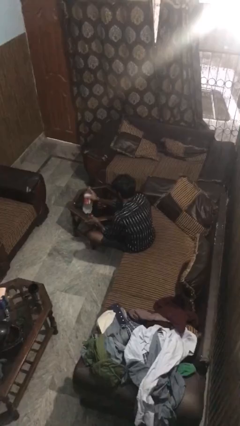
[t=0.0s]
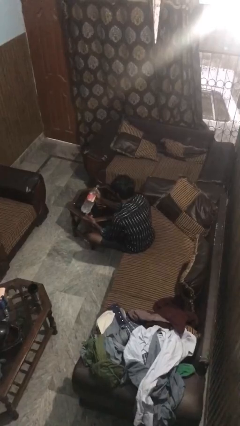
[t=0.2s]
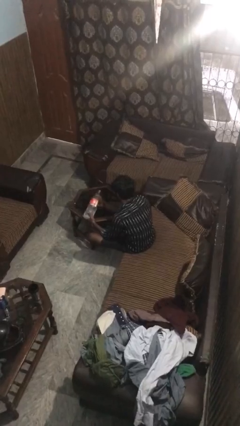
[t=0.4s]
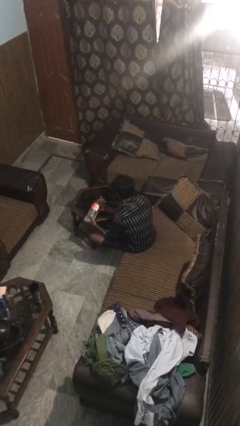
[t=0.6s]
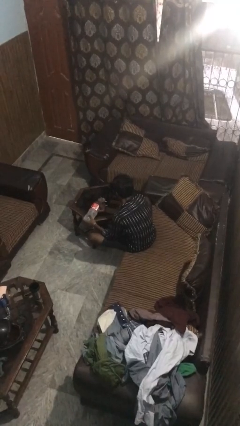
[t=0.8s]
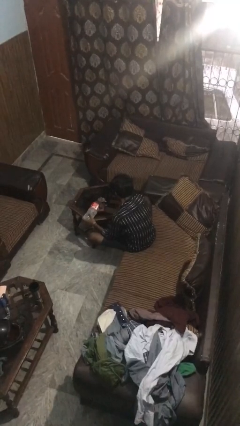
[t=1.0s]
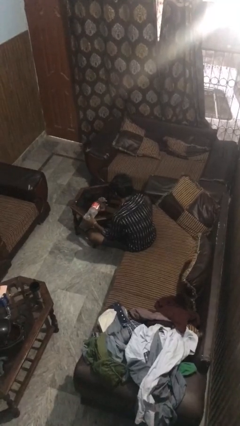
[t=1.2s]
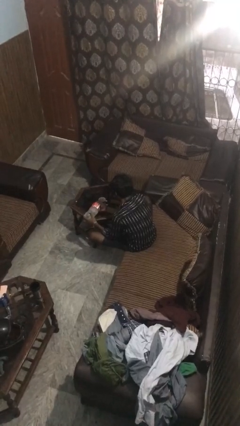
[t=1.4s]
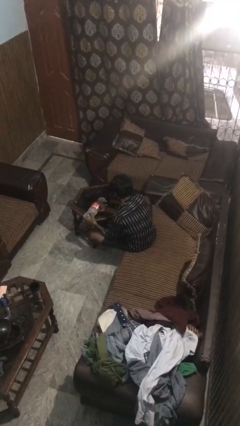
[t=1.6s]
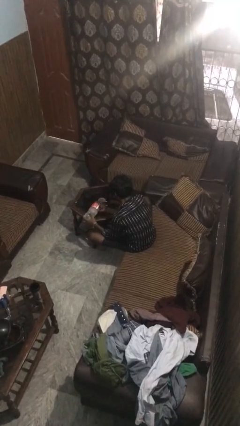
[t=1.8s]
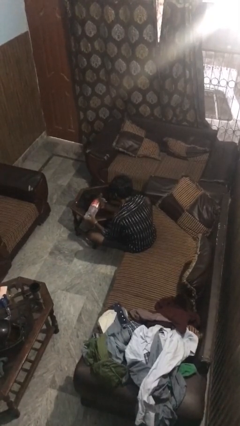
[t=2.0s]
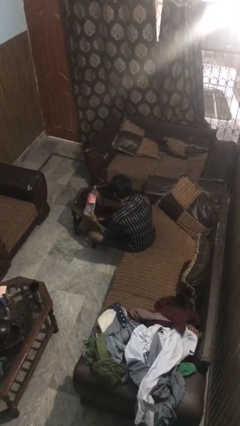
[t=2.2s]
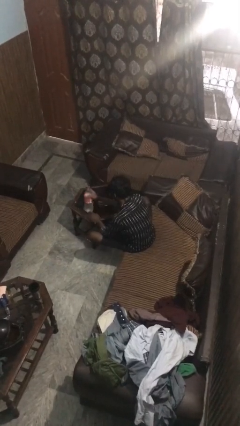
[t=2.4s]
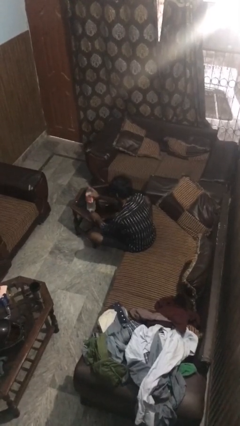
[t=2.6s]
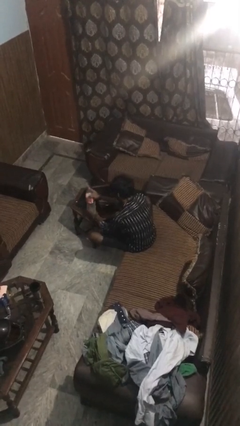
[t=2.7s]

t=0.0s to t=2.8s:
person pours liquid into cup

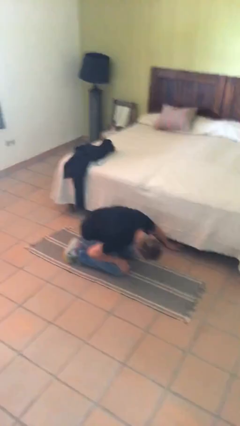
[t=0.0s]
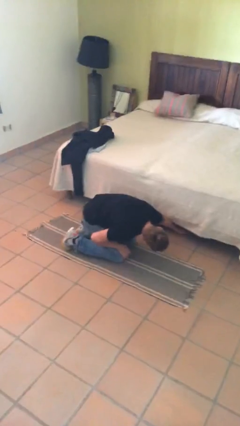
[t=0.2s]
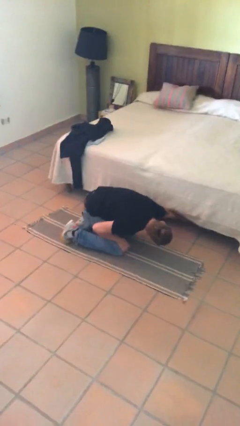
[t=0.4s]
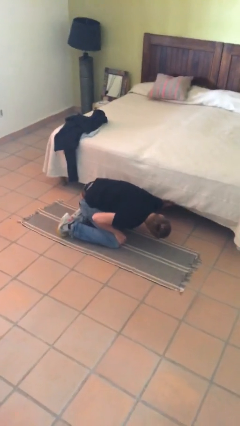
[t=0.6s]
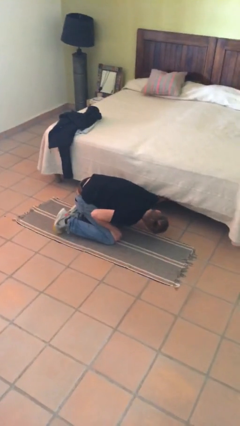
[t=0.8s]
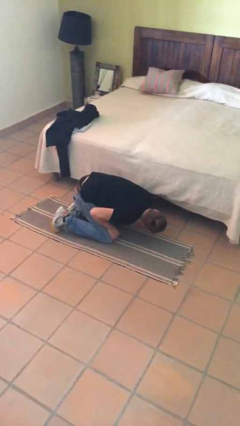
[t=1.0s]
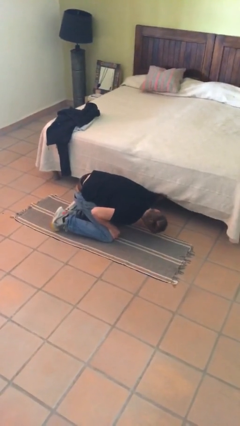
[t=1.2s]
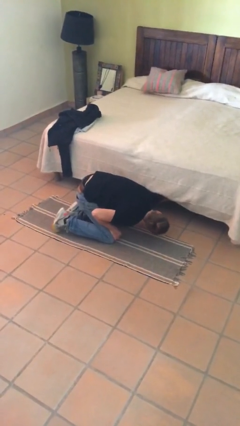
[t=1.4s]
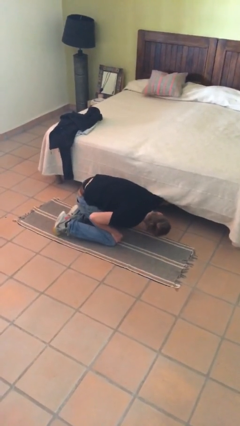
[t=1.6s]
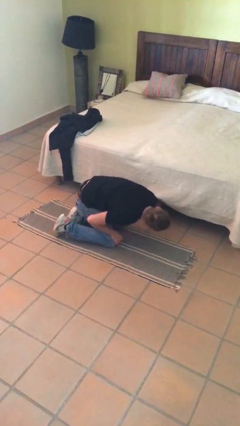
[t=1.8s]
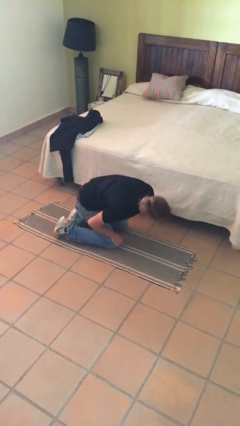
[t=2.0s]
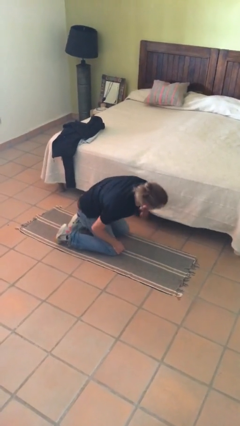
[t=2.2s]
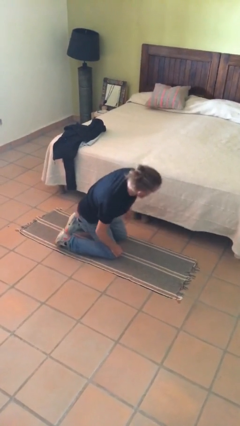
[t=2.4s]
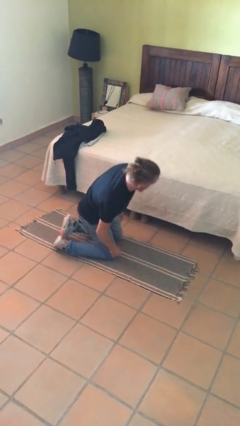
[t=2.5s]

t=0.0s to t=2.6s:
person searches under bed

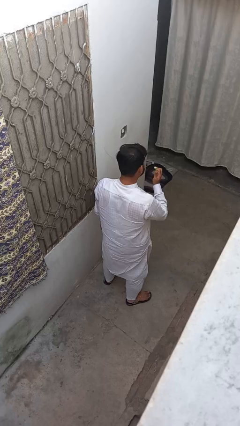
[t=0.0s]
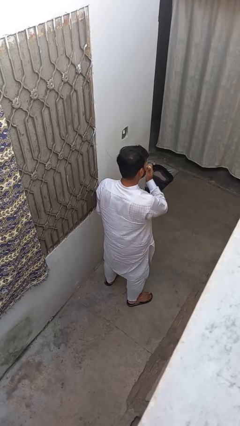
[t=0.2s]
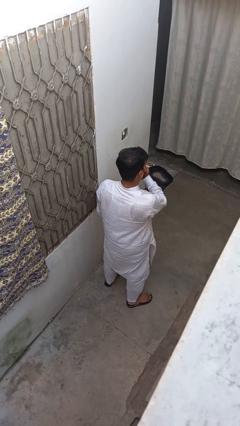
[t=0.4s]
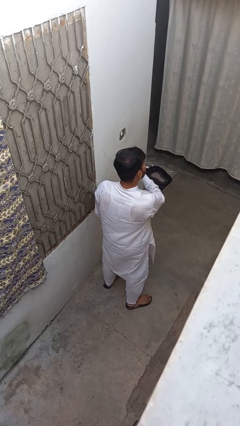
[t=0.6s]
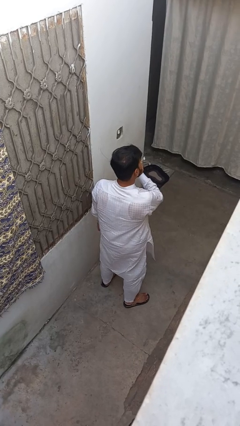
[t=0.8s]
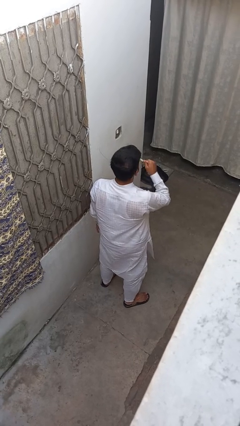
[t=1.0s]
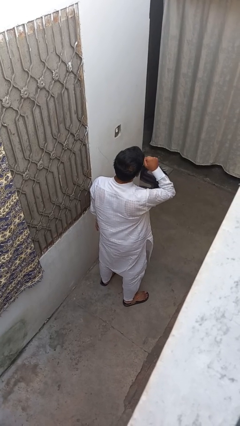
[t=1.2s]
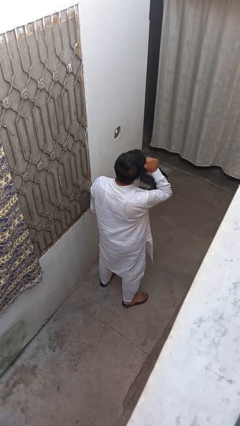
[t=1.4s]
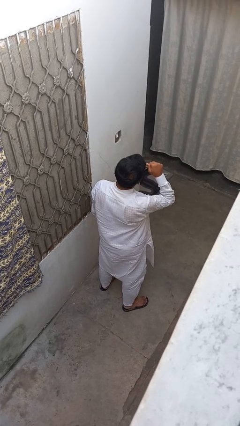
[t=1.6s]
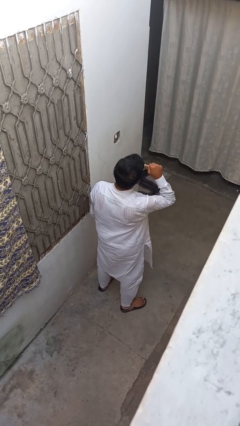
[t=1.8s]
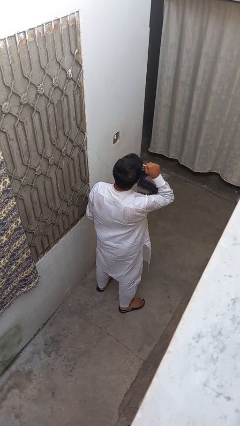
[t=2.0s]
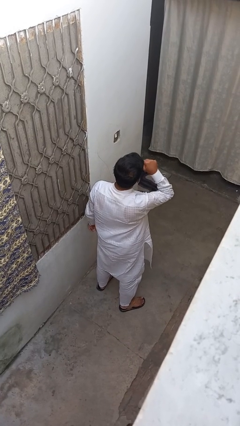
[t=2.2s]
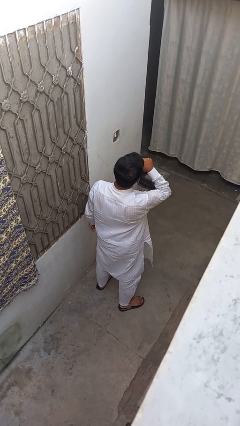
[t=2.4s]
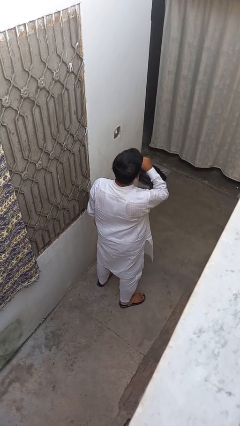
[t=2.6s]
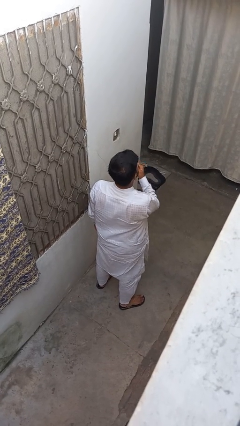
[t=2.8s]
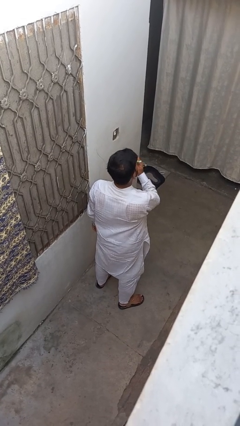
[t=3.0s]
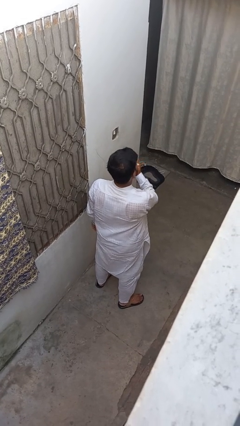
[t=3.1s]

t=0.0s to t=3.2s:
person brushes teeth

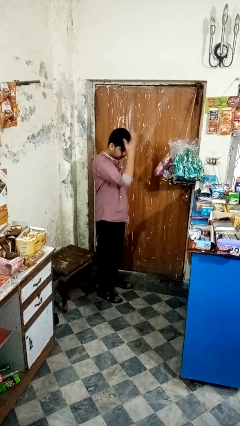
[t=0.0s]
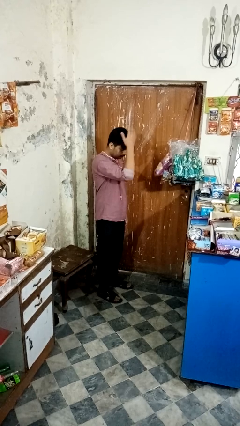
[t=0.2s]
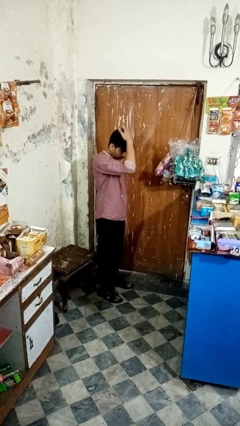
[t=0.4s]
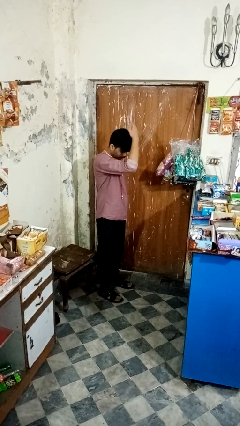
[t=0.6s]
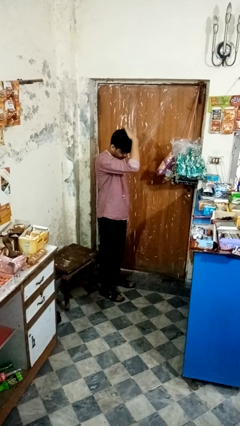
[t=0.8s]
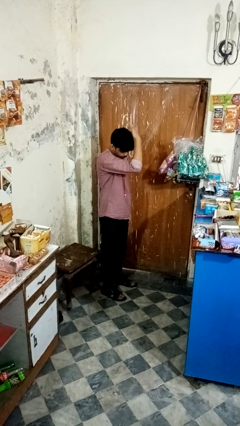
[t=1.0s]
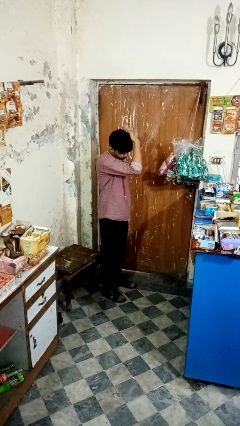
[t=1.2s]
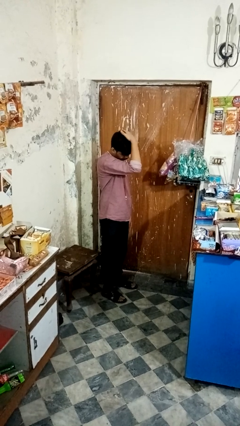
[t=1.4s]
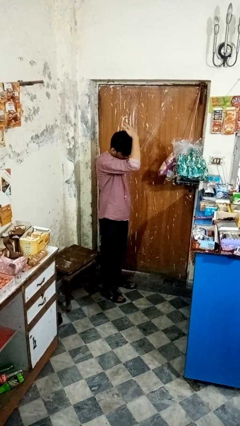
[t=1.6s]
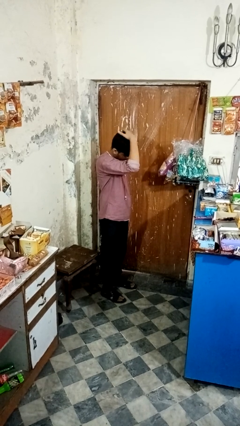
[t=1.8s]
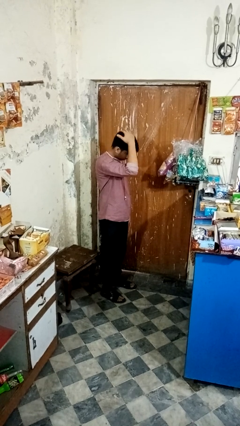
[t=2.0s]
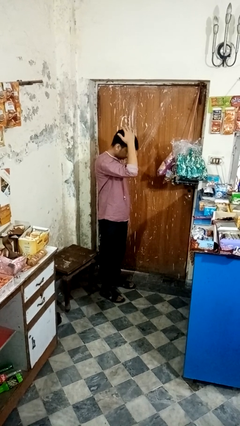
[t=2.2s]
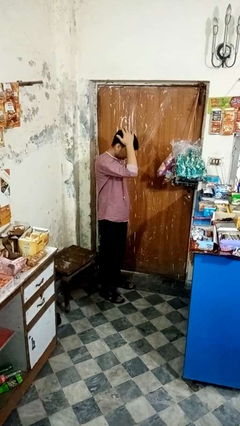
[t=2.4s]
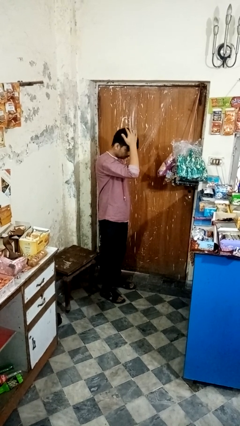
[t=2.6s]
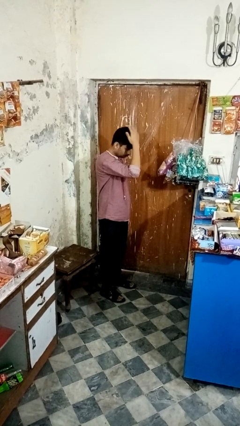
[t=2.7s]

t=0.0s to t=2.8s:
person pats head

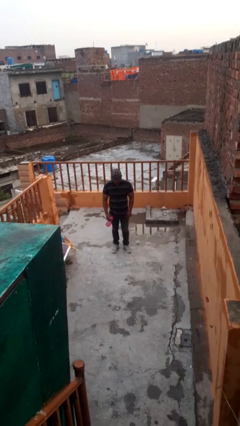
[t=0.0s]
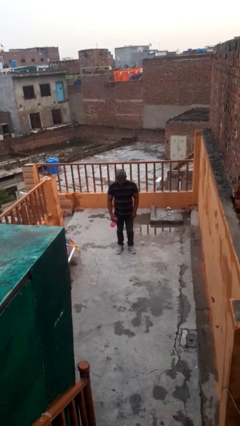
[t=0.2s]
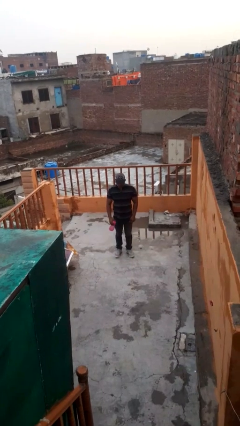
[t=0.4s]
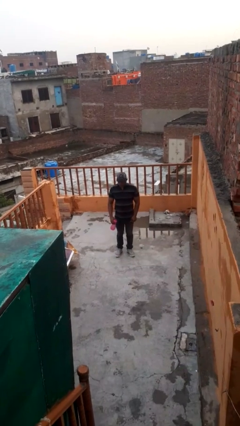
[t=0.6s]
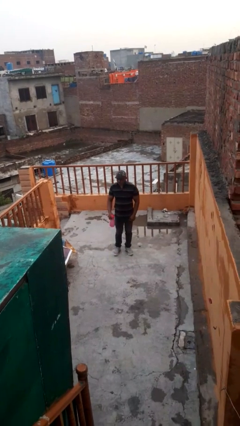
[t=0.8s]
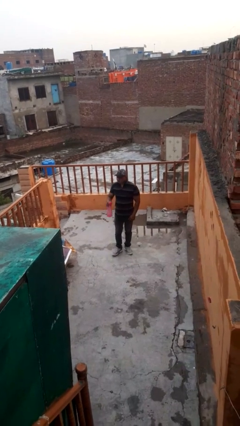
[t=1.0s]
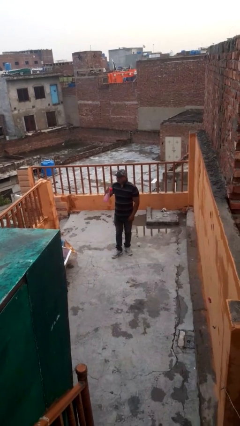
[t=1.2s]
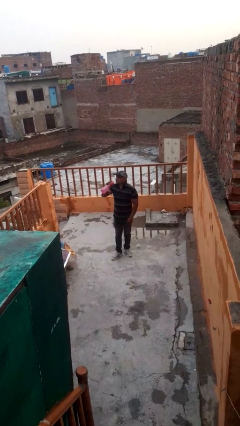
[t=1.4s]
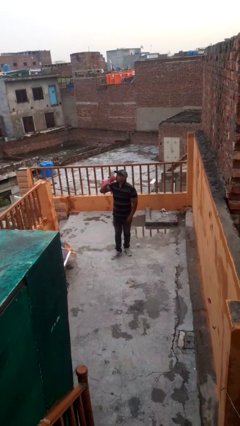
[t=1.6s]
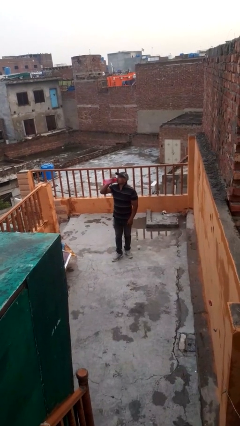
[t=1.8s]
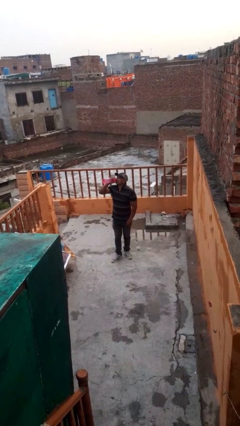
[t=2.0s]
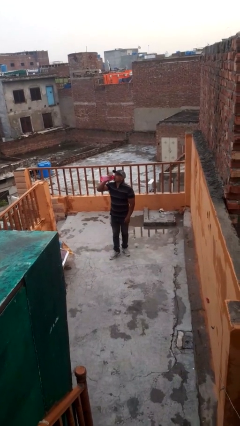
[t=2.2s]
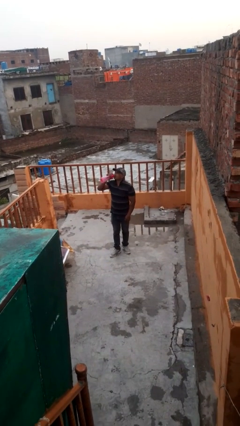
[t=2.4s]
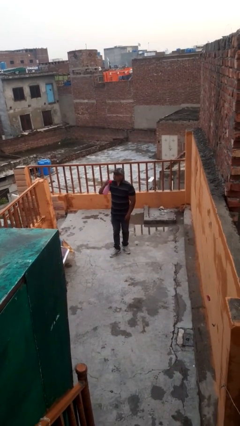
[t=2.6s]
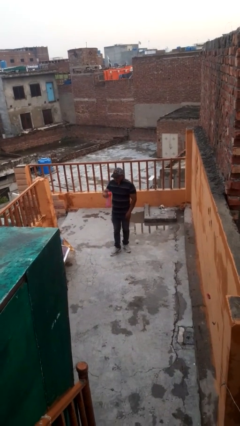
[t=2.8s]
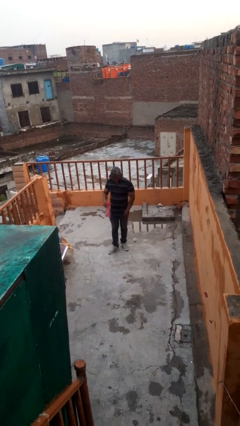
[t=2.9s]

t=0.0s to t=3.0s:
person drinks from bottle

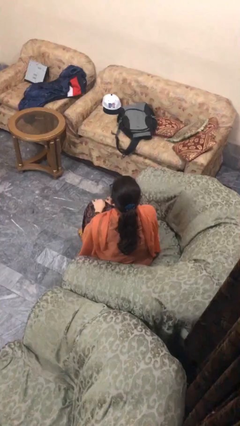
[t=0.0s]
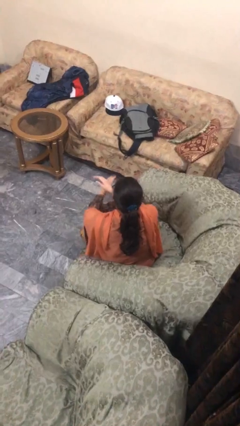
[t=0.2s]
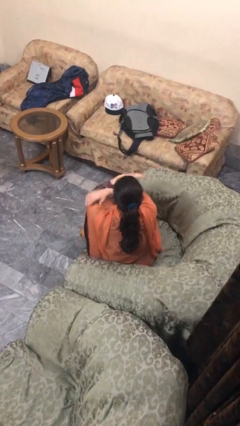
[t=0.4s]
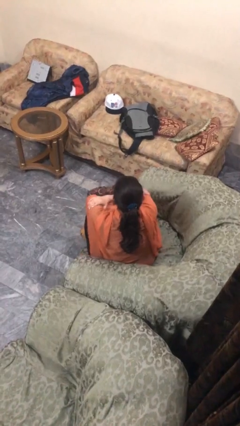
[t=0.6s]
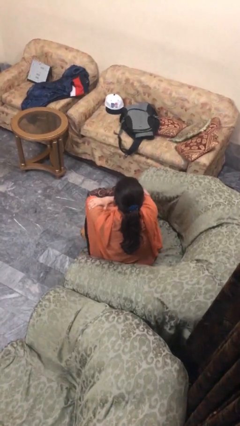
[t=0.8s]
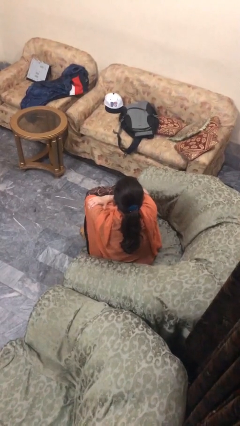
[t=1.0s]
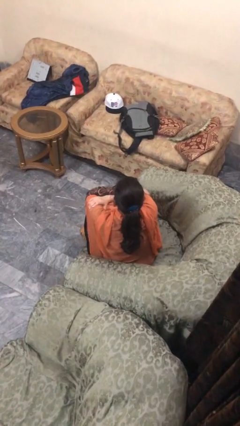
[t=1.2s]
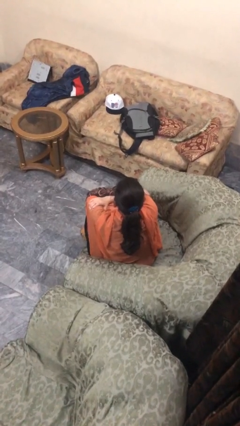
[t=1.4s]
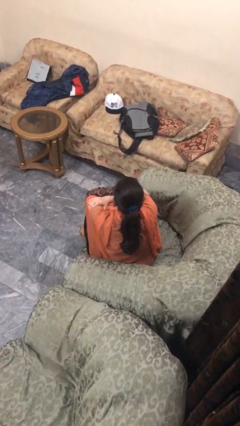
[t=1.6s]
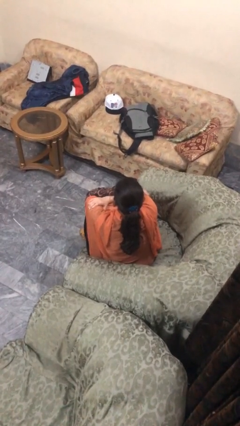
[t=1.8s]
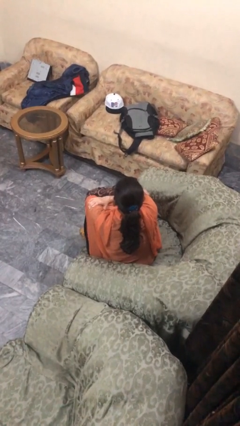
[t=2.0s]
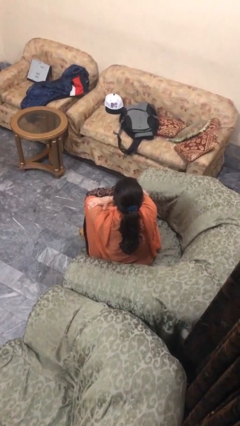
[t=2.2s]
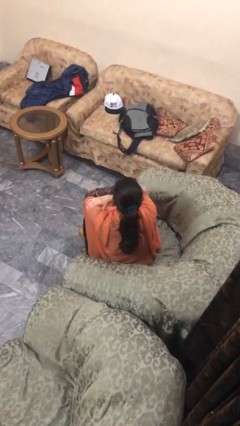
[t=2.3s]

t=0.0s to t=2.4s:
person crosses arms

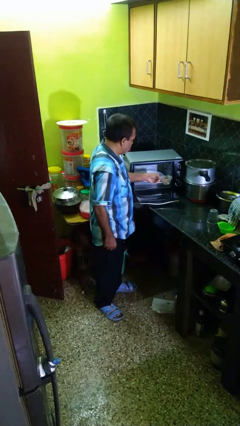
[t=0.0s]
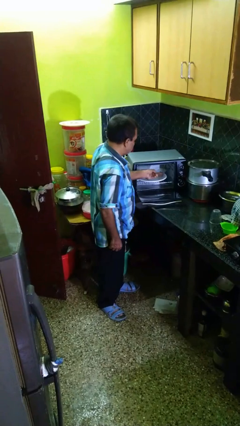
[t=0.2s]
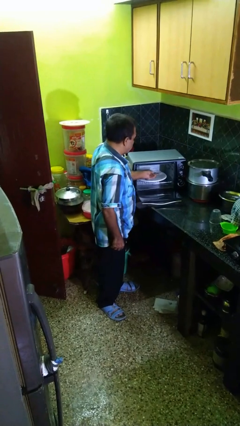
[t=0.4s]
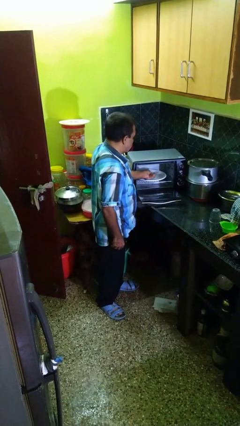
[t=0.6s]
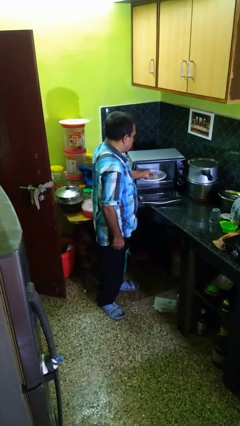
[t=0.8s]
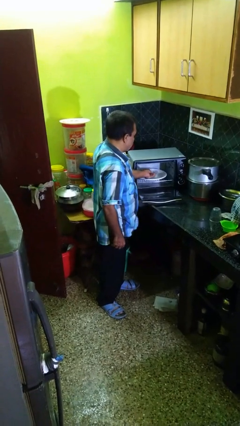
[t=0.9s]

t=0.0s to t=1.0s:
person puts object into microwave
